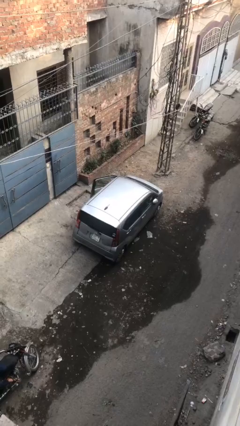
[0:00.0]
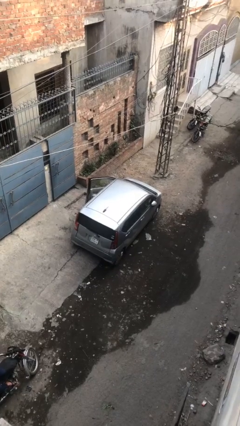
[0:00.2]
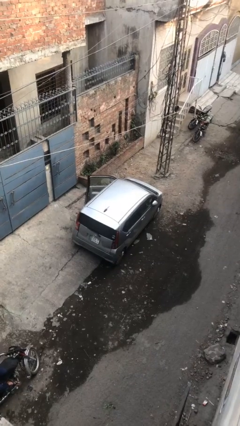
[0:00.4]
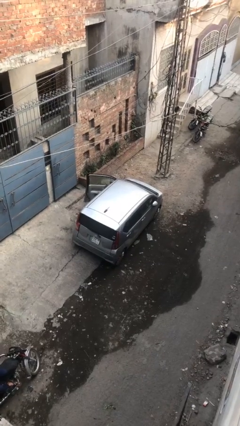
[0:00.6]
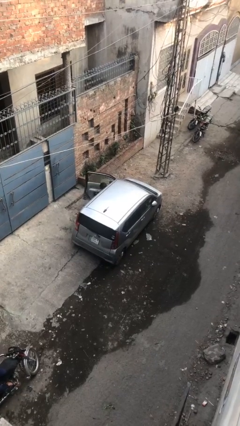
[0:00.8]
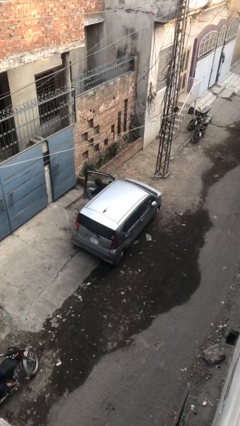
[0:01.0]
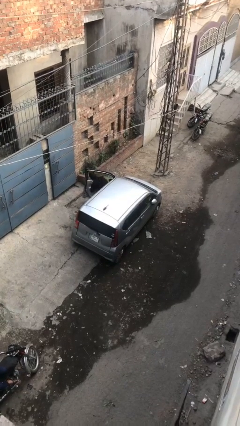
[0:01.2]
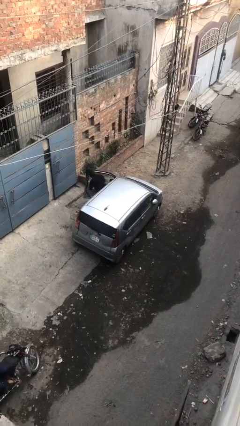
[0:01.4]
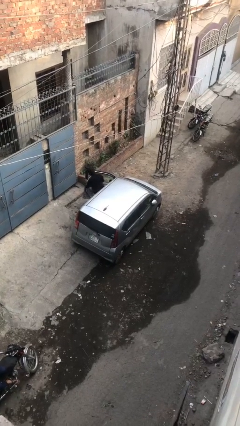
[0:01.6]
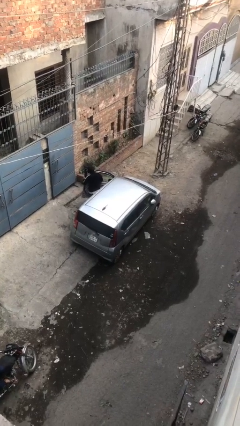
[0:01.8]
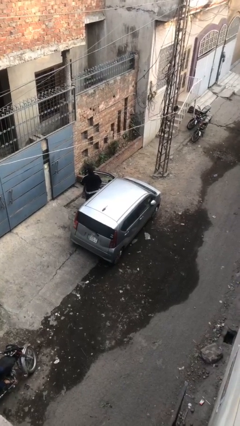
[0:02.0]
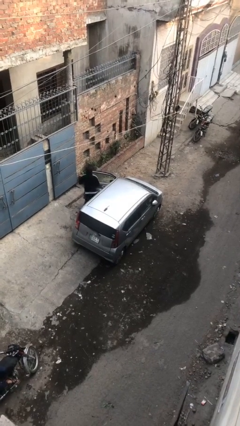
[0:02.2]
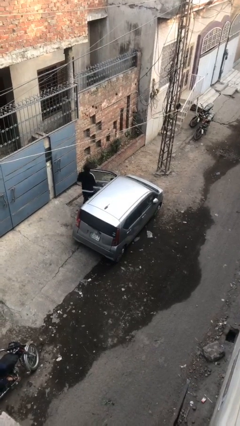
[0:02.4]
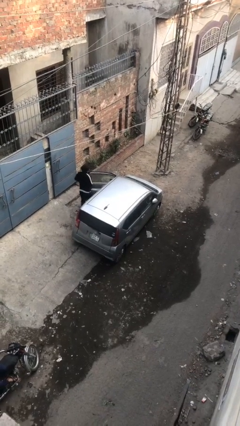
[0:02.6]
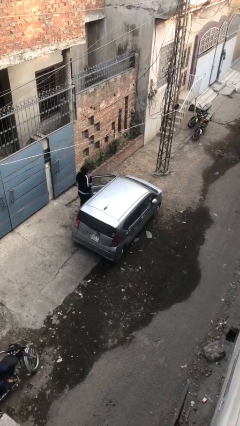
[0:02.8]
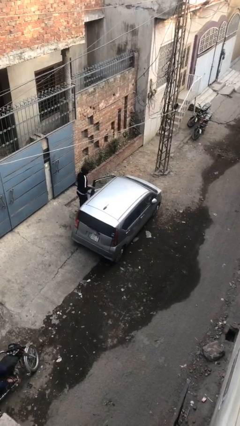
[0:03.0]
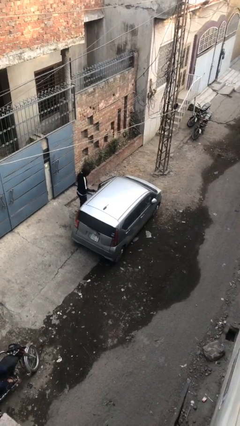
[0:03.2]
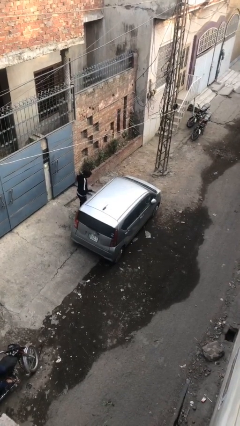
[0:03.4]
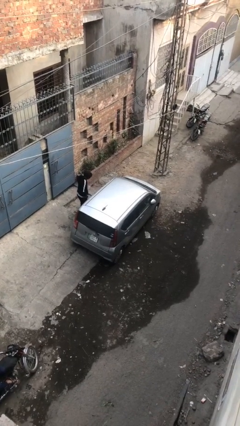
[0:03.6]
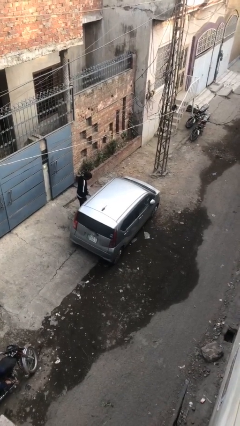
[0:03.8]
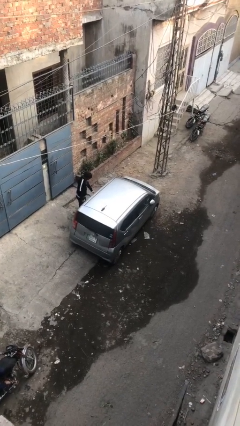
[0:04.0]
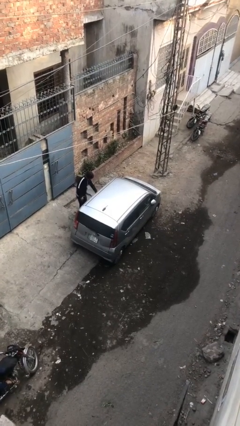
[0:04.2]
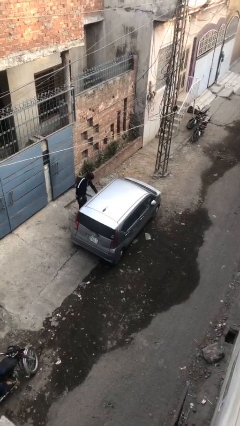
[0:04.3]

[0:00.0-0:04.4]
car drops off person

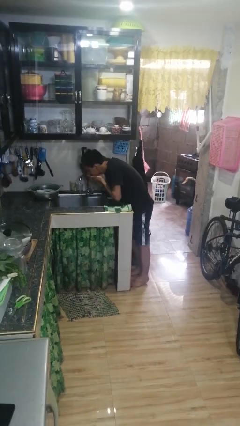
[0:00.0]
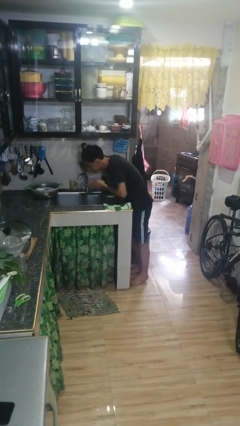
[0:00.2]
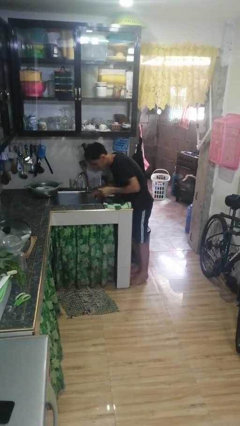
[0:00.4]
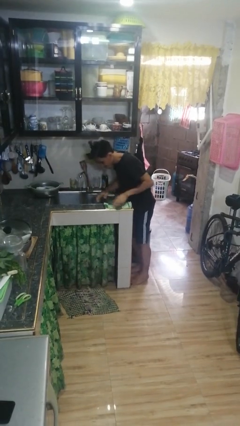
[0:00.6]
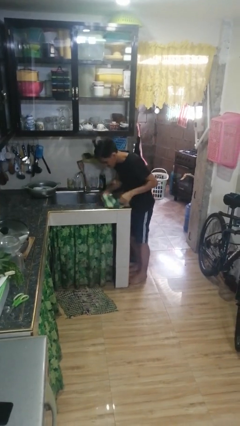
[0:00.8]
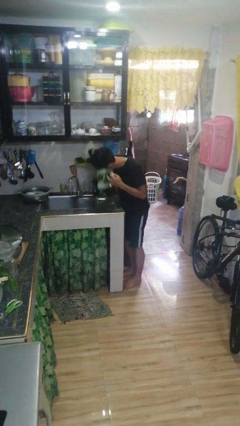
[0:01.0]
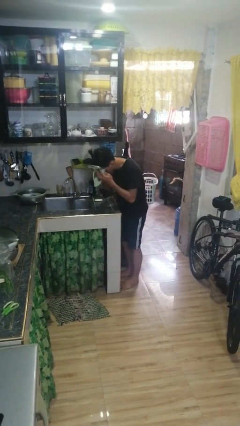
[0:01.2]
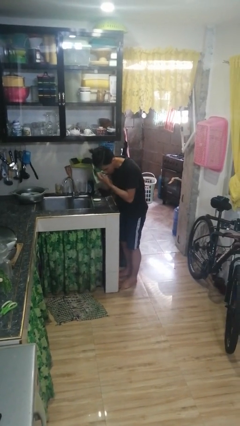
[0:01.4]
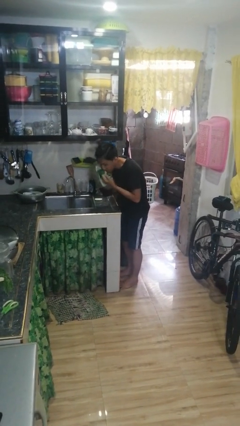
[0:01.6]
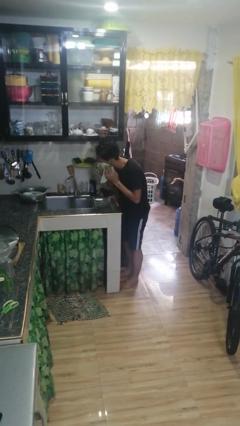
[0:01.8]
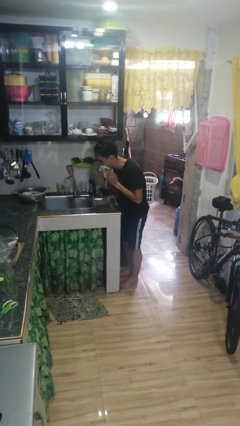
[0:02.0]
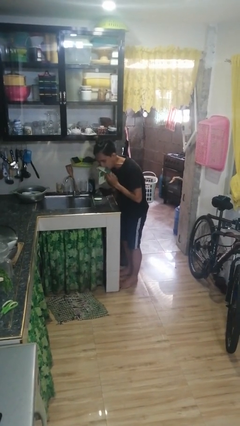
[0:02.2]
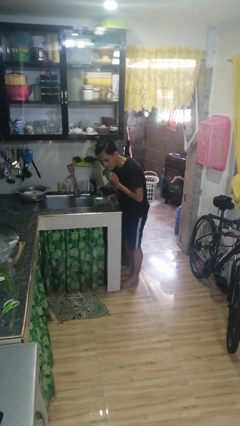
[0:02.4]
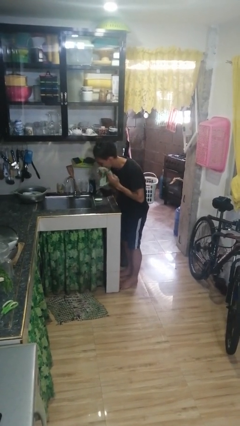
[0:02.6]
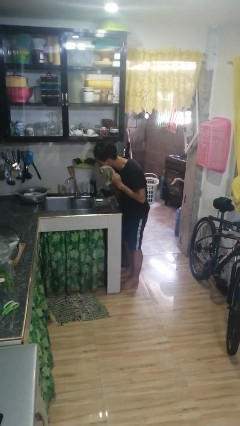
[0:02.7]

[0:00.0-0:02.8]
person dries face with towel

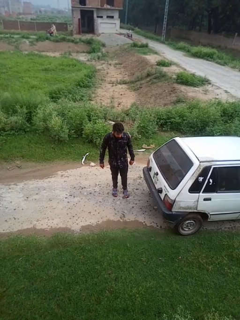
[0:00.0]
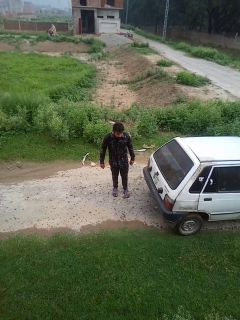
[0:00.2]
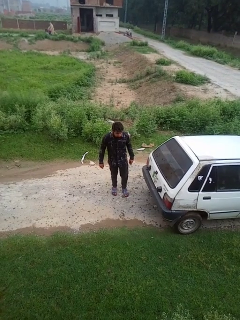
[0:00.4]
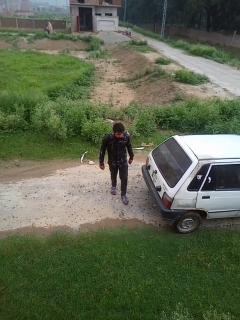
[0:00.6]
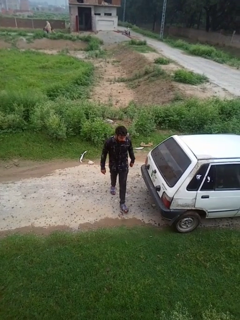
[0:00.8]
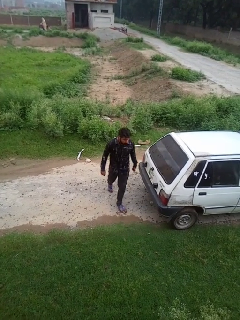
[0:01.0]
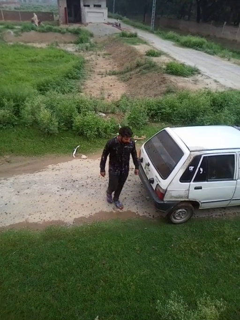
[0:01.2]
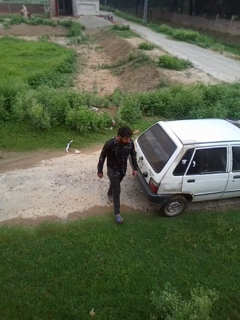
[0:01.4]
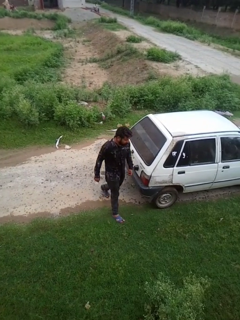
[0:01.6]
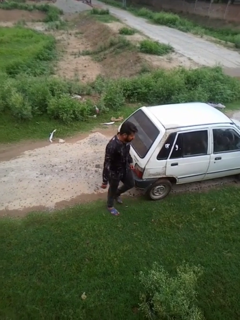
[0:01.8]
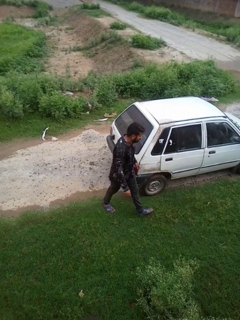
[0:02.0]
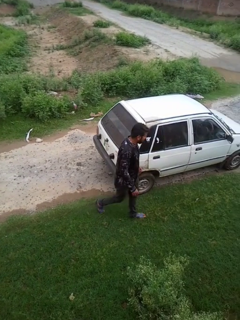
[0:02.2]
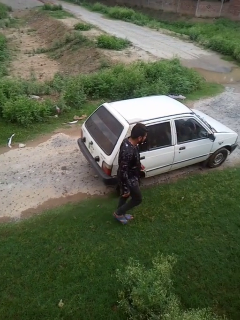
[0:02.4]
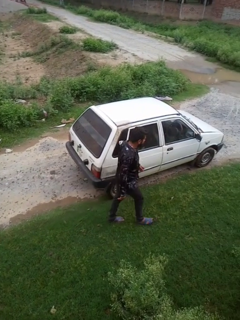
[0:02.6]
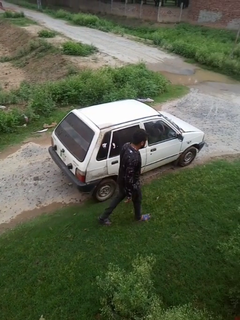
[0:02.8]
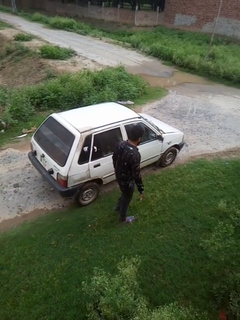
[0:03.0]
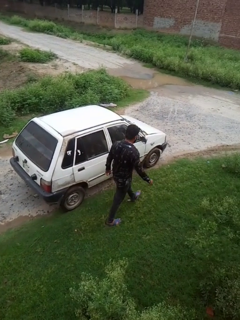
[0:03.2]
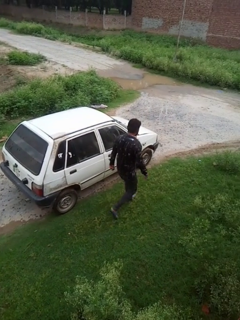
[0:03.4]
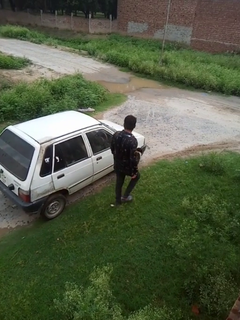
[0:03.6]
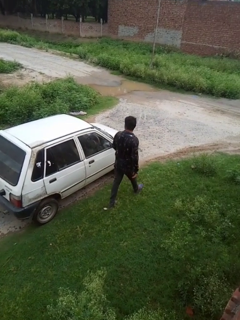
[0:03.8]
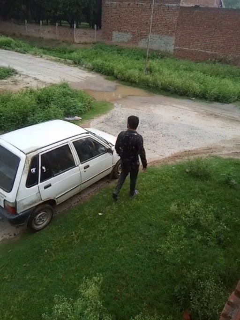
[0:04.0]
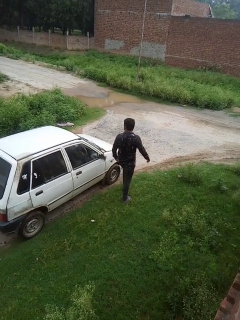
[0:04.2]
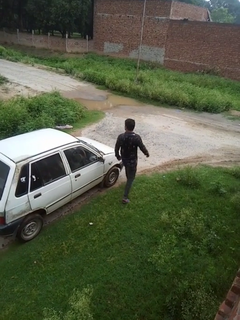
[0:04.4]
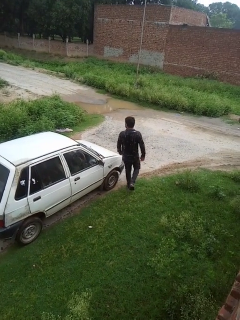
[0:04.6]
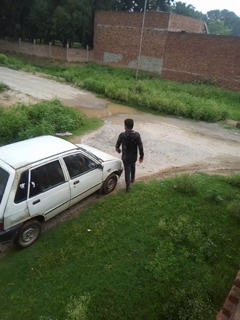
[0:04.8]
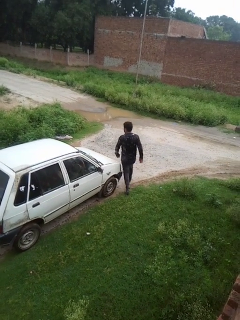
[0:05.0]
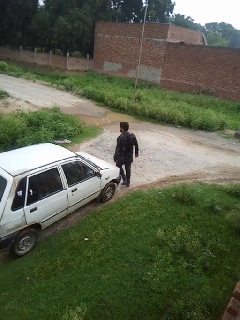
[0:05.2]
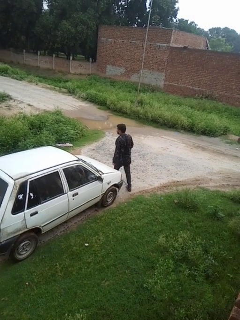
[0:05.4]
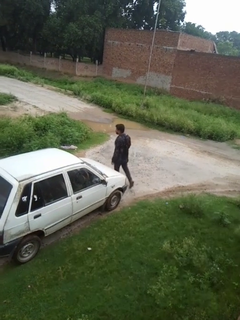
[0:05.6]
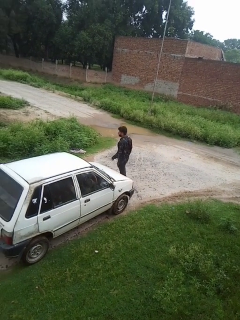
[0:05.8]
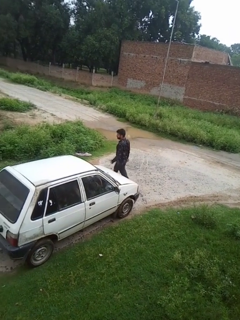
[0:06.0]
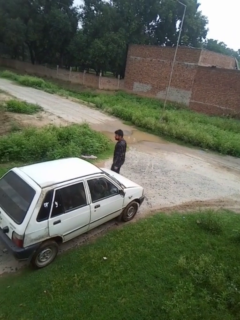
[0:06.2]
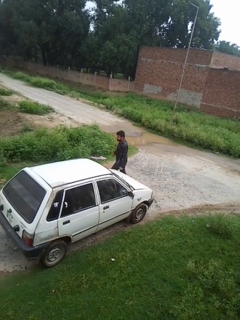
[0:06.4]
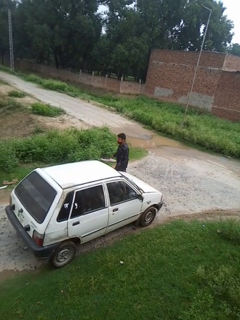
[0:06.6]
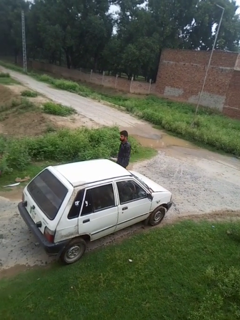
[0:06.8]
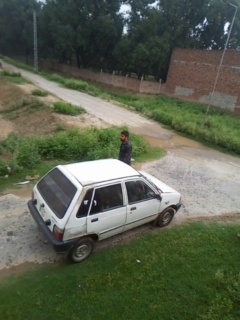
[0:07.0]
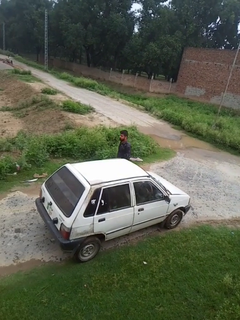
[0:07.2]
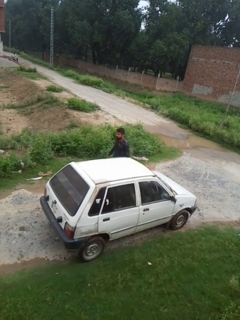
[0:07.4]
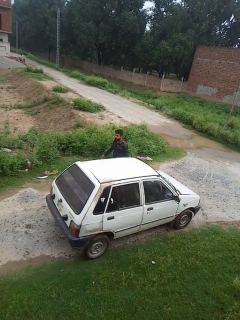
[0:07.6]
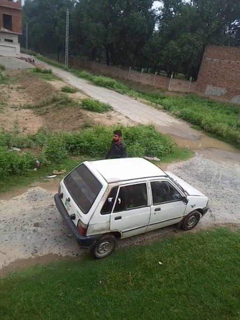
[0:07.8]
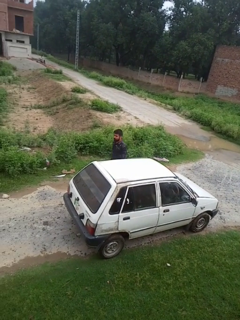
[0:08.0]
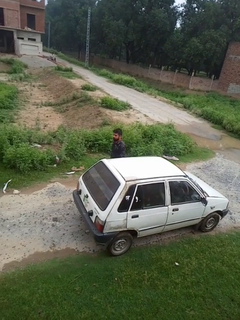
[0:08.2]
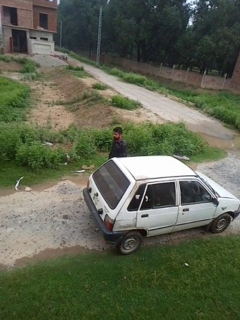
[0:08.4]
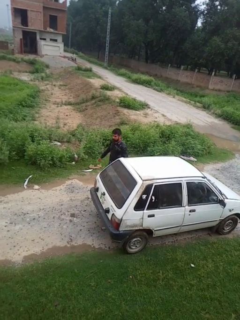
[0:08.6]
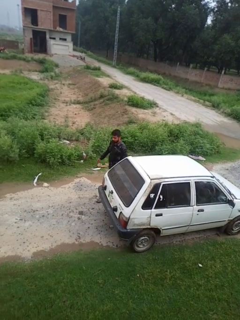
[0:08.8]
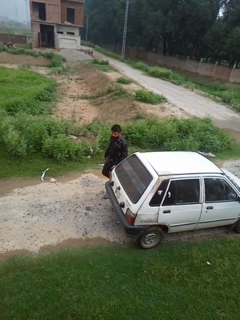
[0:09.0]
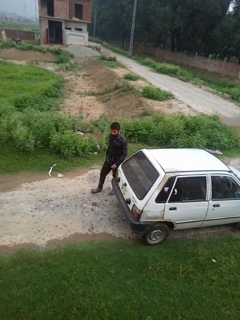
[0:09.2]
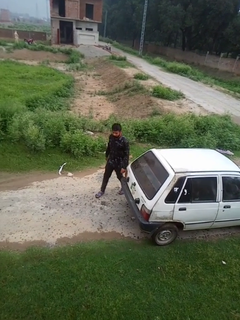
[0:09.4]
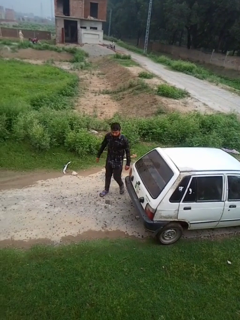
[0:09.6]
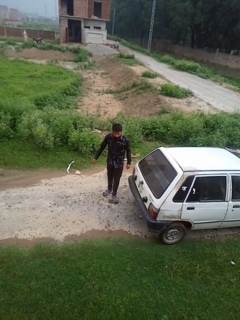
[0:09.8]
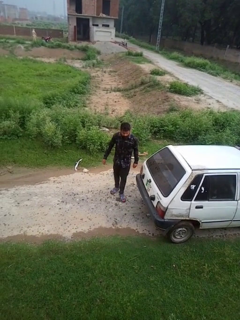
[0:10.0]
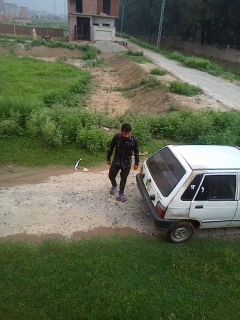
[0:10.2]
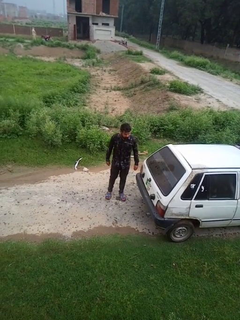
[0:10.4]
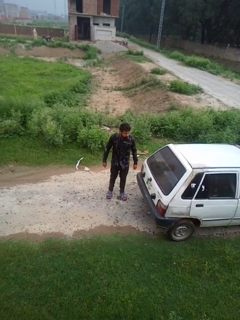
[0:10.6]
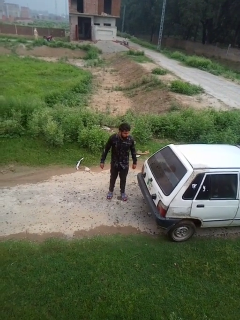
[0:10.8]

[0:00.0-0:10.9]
person walks around car

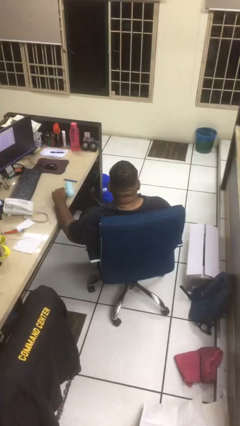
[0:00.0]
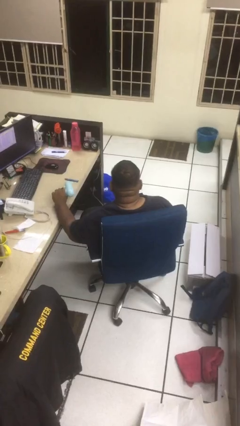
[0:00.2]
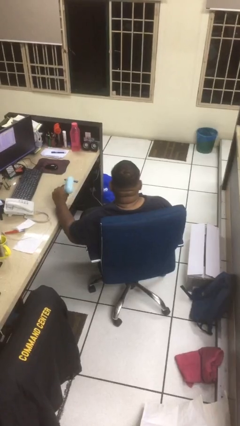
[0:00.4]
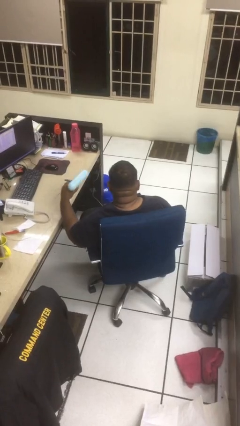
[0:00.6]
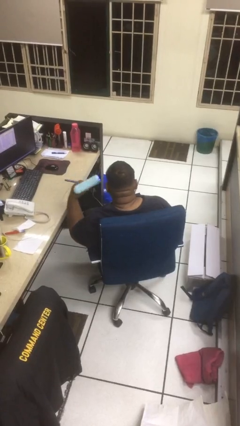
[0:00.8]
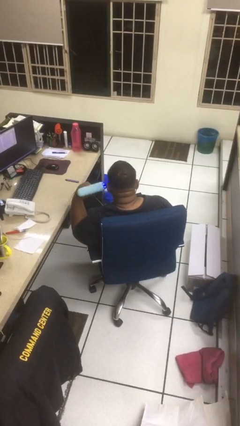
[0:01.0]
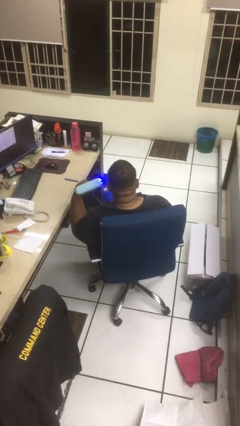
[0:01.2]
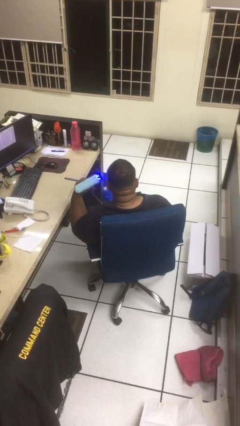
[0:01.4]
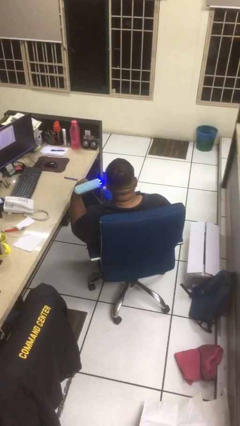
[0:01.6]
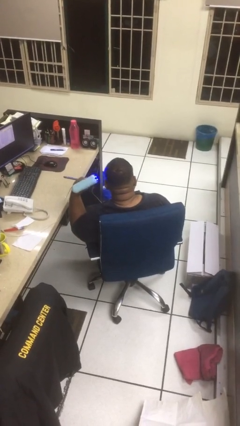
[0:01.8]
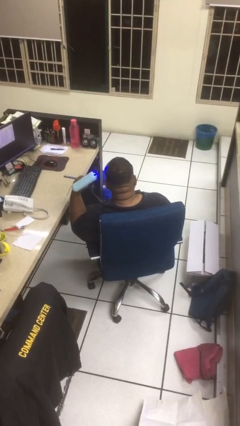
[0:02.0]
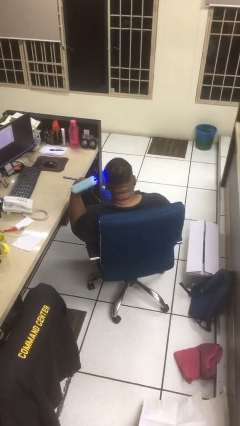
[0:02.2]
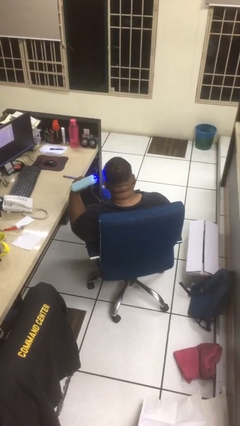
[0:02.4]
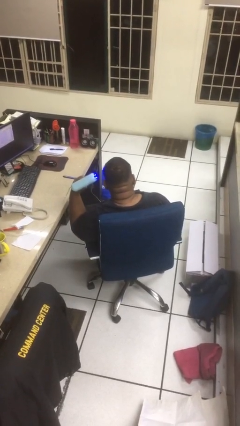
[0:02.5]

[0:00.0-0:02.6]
person dries hair with hairdryer
